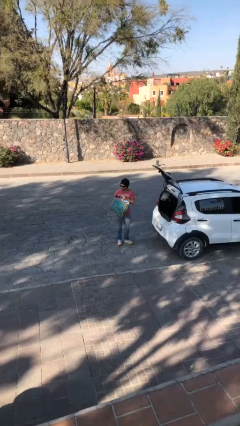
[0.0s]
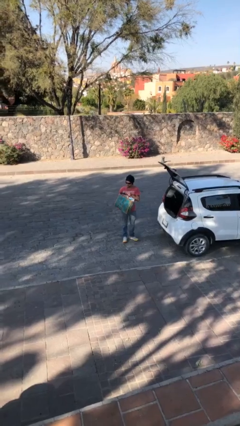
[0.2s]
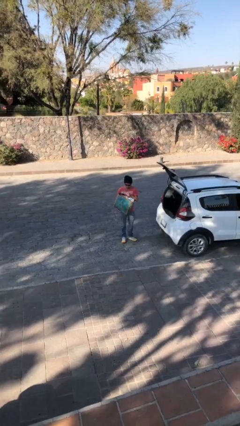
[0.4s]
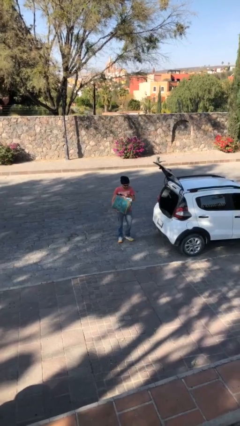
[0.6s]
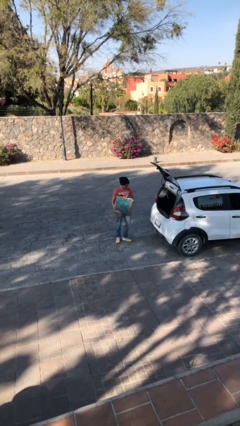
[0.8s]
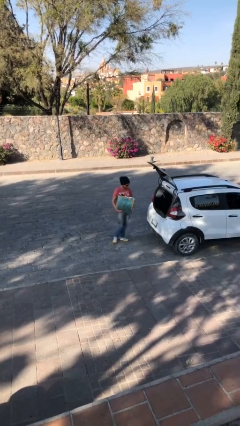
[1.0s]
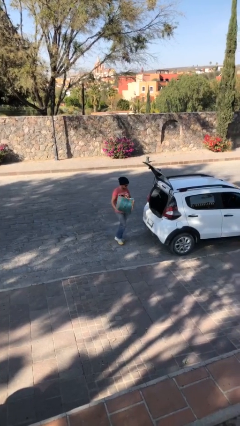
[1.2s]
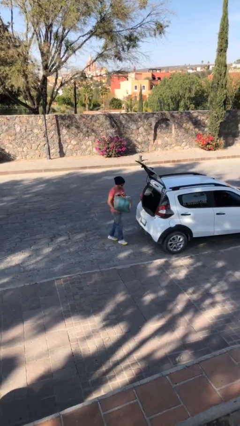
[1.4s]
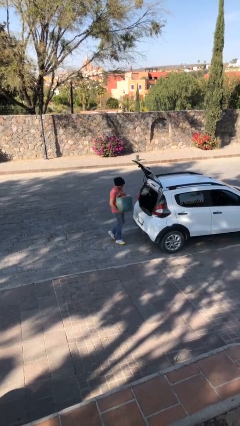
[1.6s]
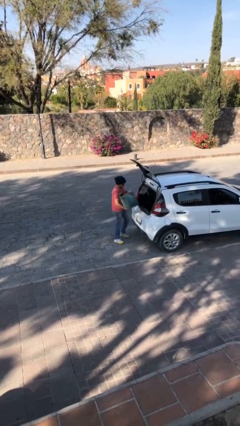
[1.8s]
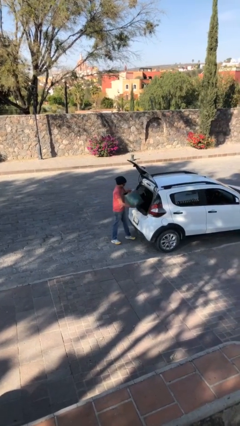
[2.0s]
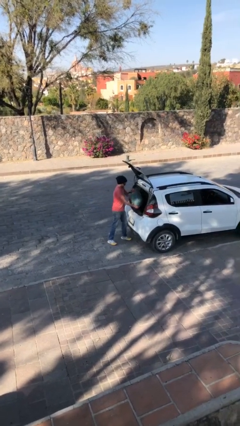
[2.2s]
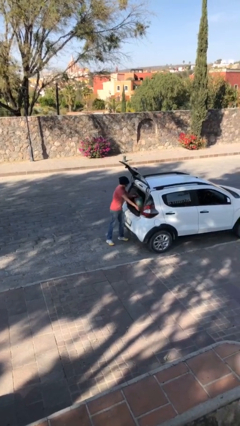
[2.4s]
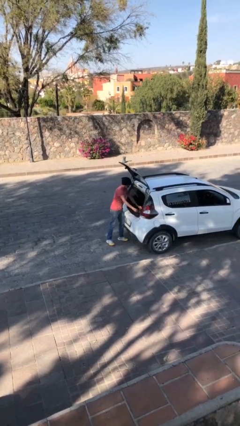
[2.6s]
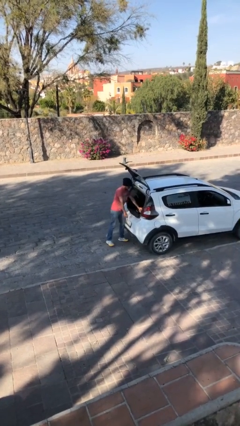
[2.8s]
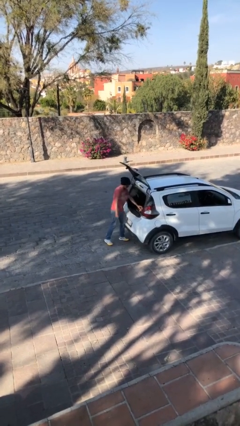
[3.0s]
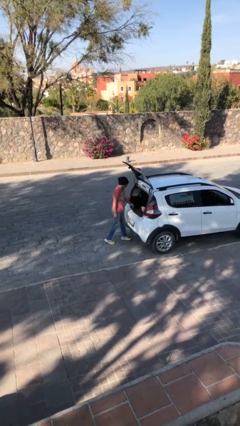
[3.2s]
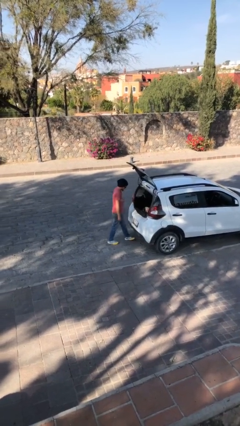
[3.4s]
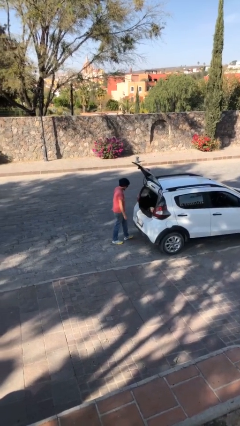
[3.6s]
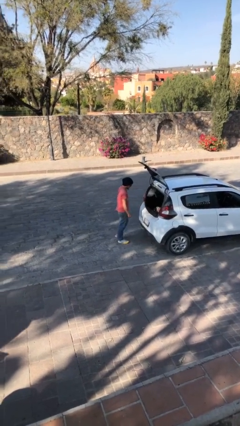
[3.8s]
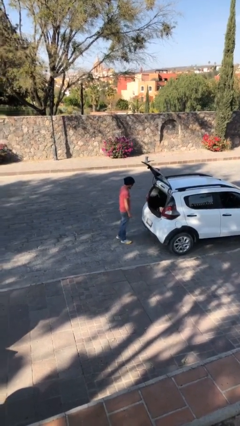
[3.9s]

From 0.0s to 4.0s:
person loads car

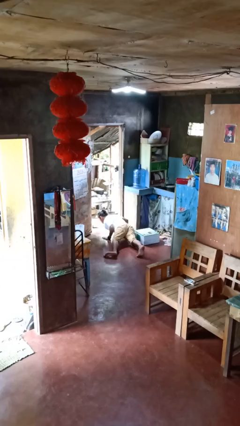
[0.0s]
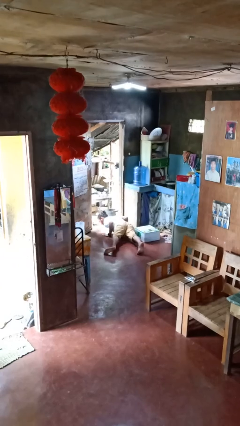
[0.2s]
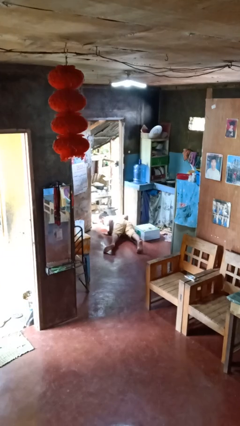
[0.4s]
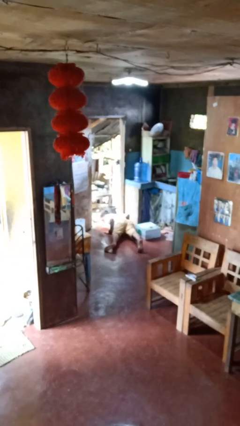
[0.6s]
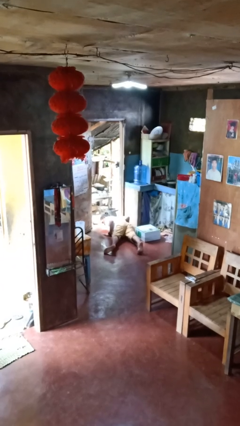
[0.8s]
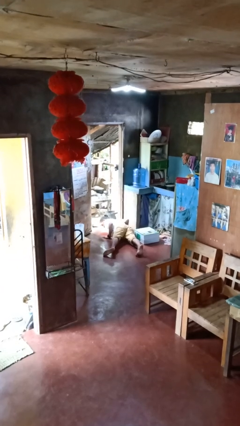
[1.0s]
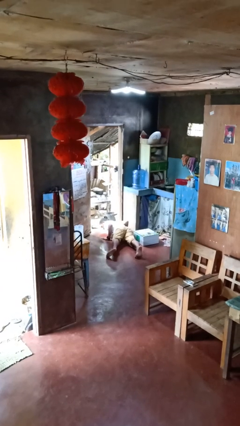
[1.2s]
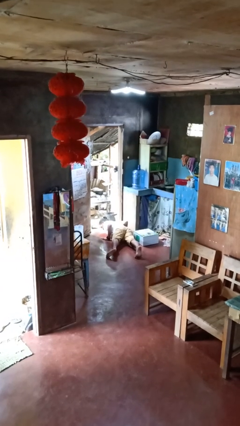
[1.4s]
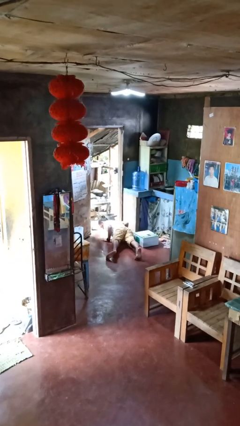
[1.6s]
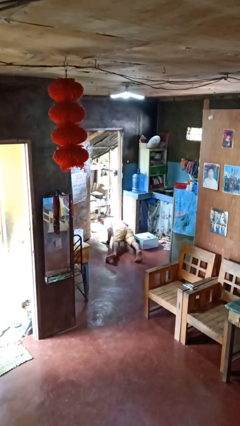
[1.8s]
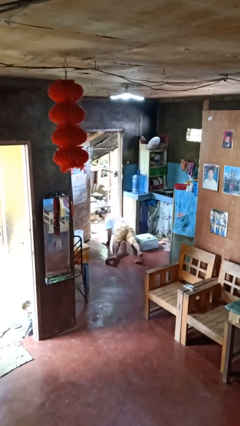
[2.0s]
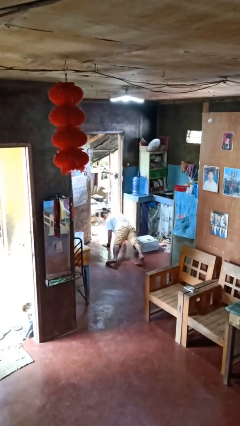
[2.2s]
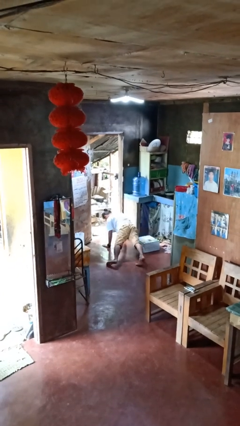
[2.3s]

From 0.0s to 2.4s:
person lies down on floor

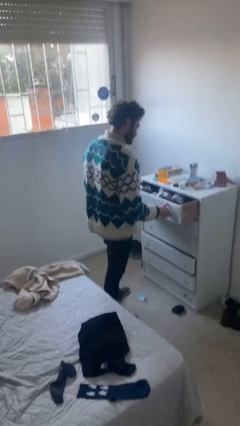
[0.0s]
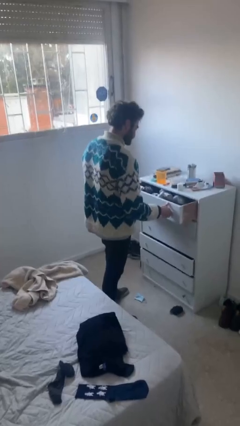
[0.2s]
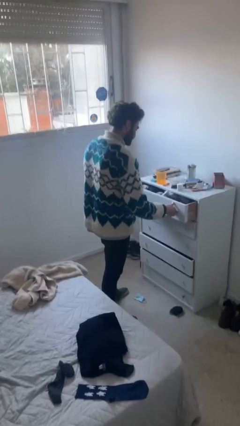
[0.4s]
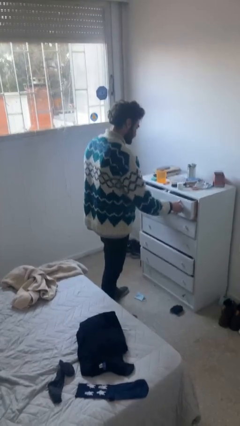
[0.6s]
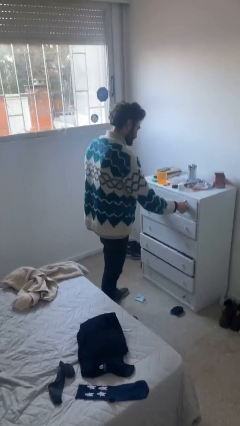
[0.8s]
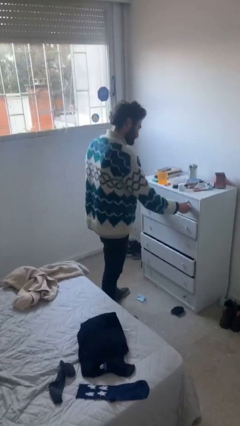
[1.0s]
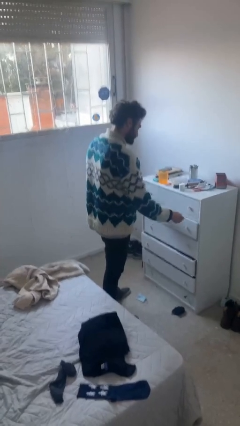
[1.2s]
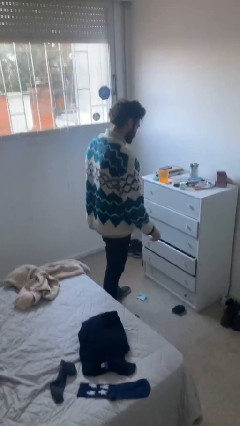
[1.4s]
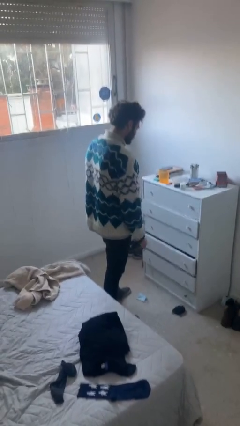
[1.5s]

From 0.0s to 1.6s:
person closes dresser drawer

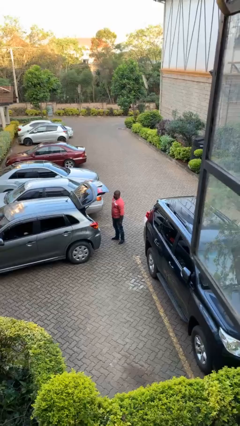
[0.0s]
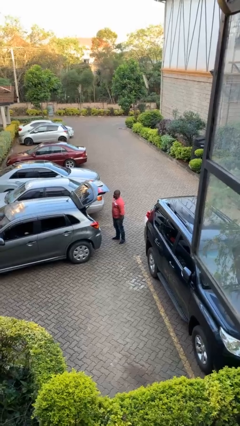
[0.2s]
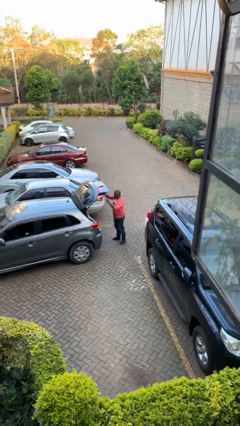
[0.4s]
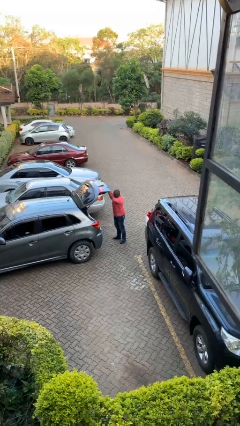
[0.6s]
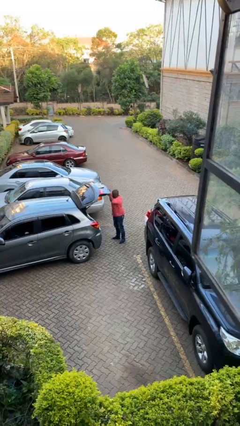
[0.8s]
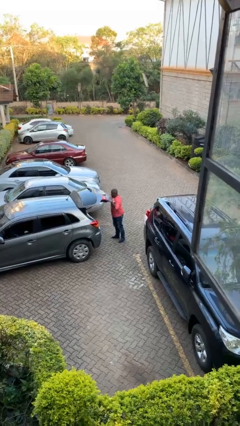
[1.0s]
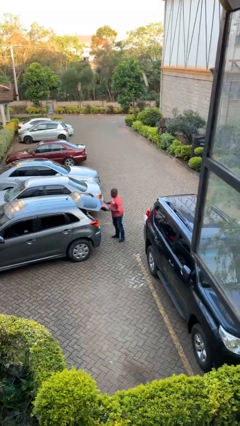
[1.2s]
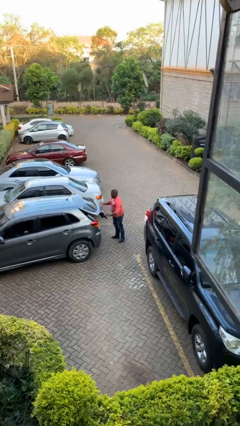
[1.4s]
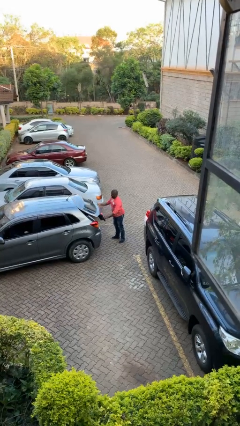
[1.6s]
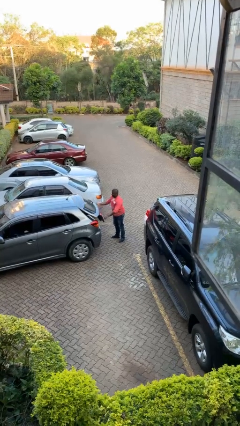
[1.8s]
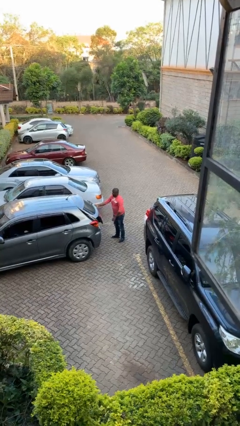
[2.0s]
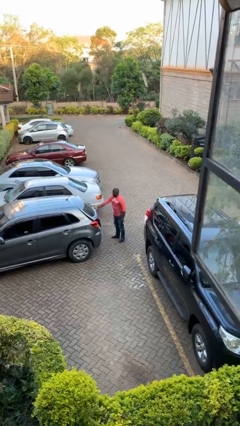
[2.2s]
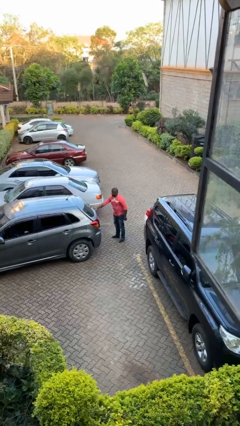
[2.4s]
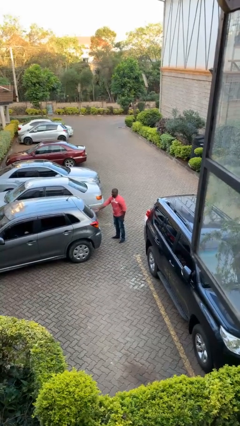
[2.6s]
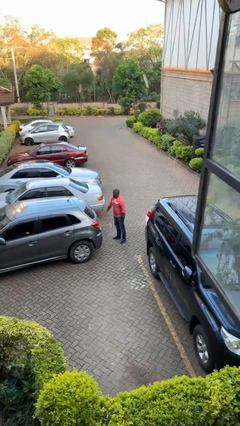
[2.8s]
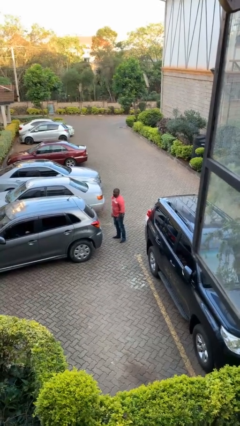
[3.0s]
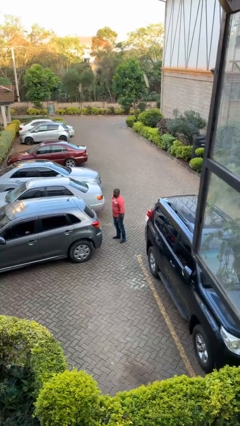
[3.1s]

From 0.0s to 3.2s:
person closes car trunk

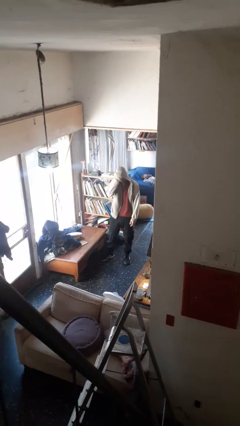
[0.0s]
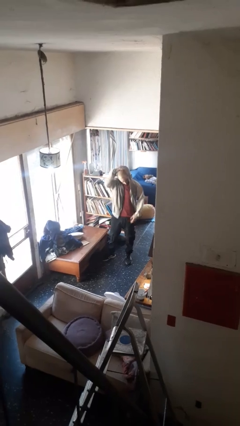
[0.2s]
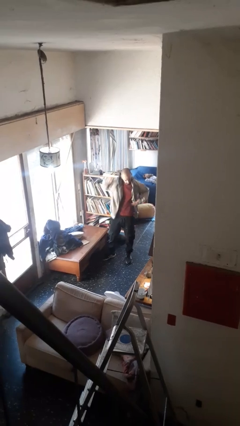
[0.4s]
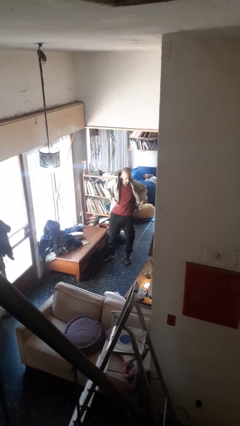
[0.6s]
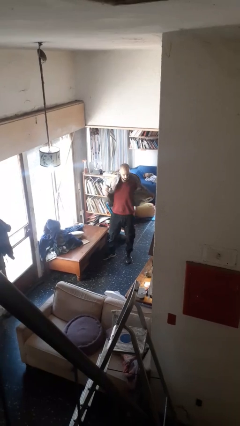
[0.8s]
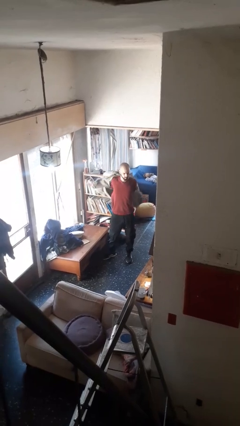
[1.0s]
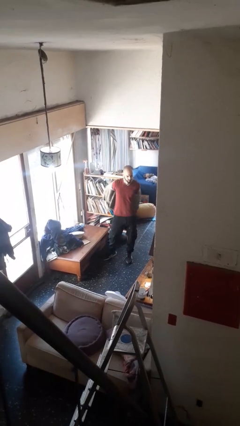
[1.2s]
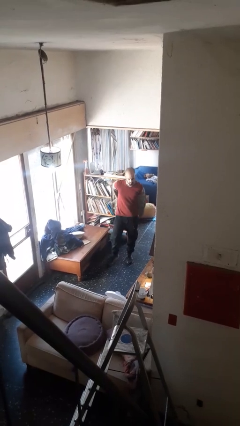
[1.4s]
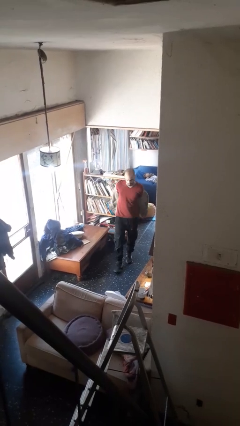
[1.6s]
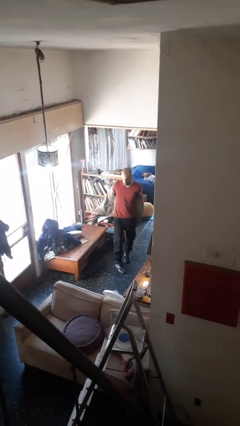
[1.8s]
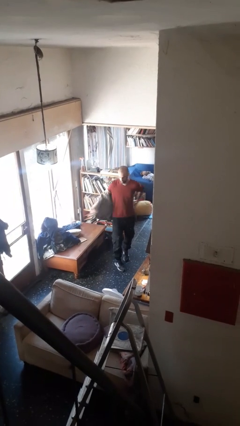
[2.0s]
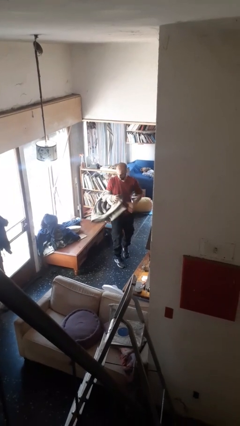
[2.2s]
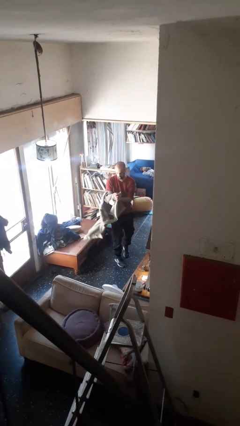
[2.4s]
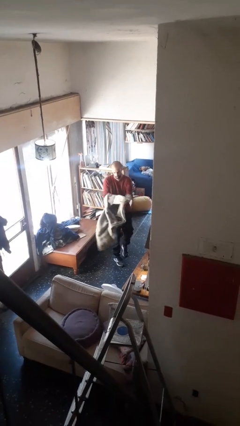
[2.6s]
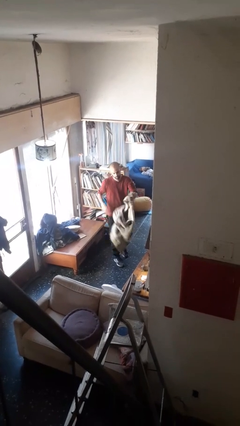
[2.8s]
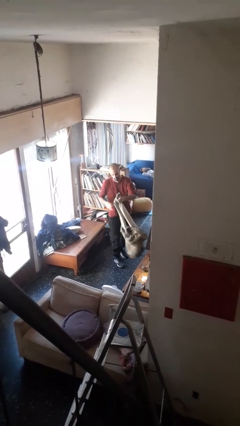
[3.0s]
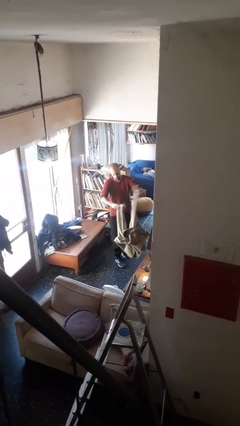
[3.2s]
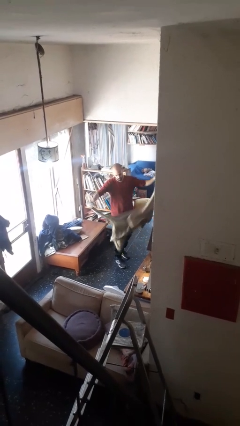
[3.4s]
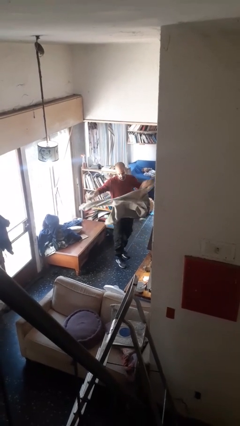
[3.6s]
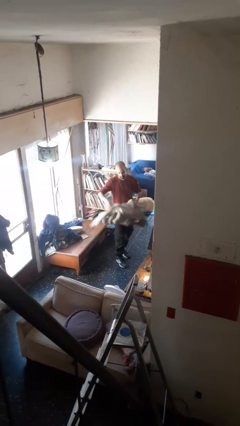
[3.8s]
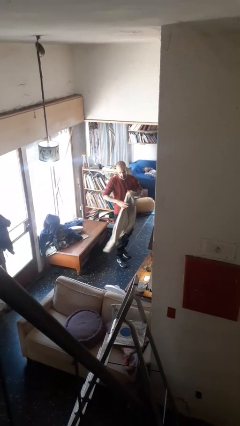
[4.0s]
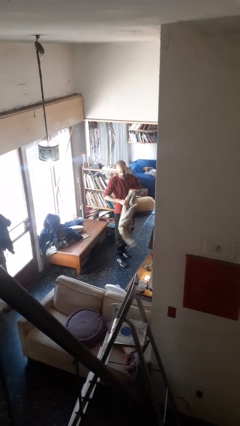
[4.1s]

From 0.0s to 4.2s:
person takes off hoodie

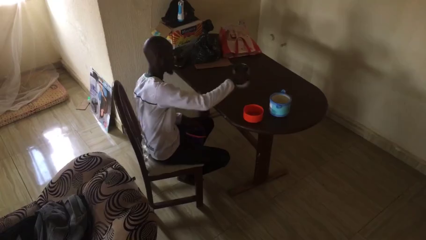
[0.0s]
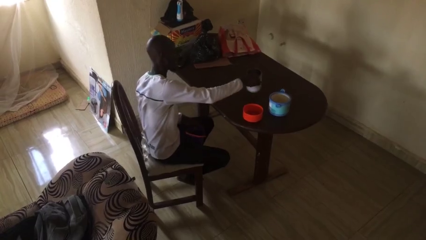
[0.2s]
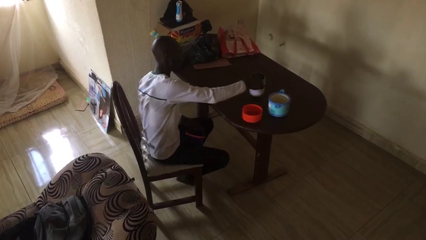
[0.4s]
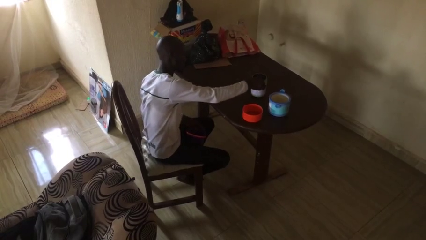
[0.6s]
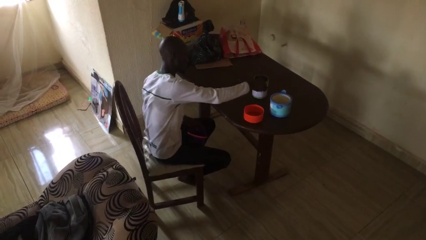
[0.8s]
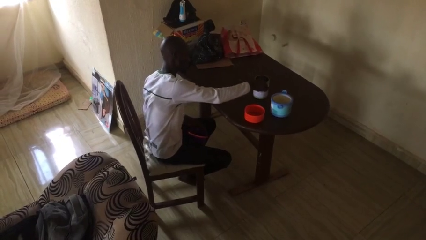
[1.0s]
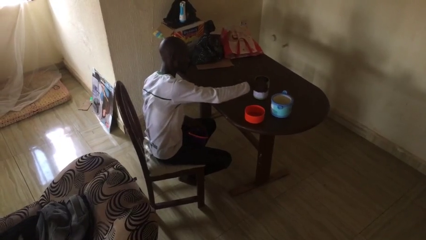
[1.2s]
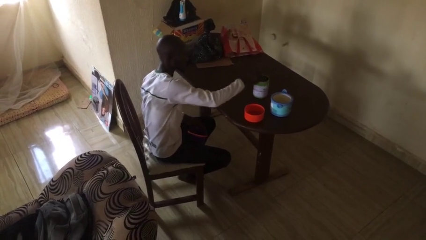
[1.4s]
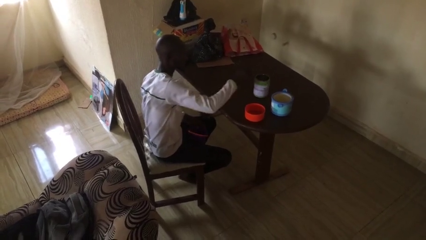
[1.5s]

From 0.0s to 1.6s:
person sets table

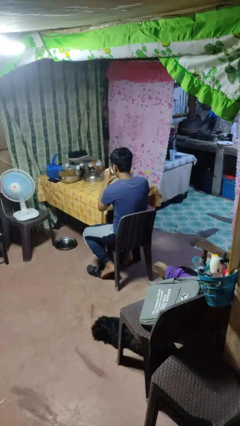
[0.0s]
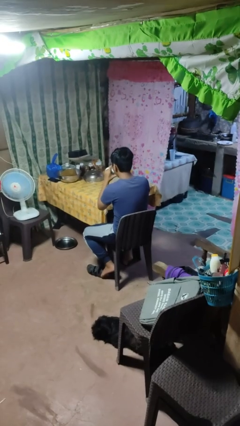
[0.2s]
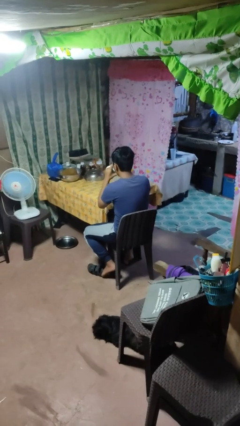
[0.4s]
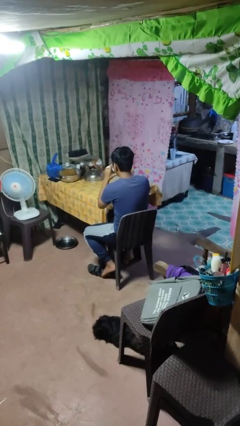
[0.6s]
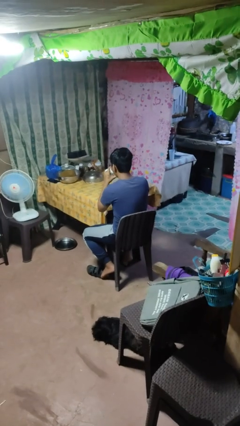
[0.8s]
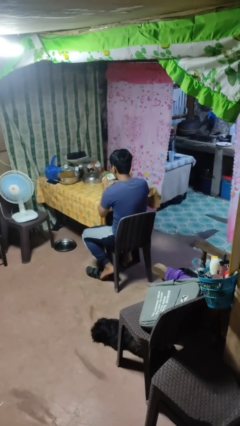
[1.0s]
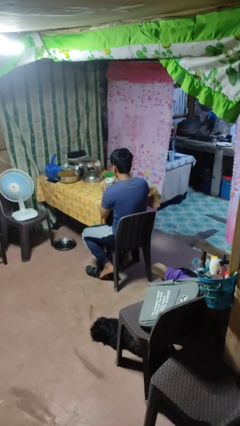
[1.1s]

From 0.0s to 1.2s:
person drinks from mug
